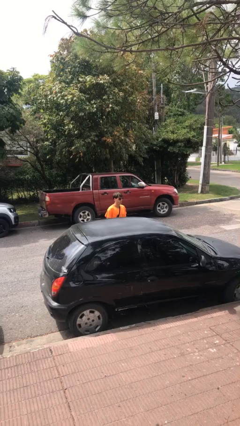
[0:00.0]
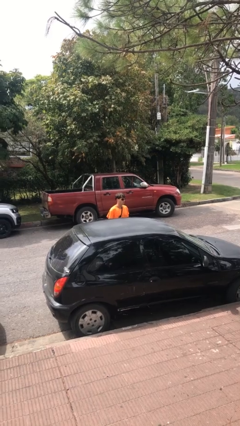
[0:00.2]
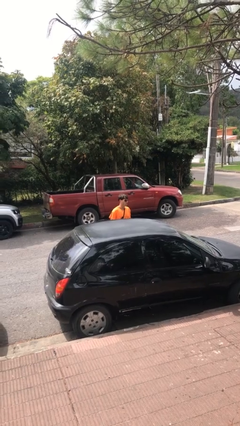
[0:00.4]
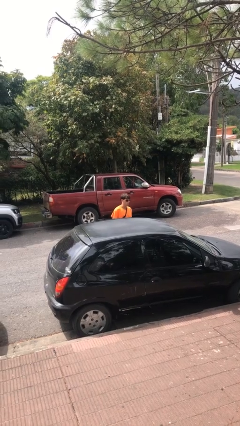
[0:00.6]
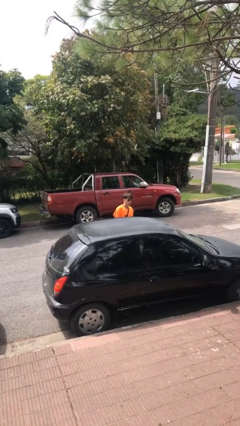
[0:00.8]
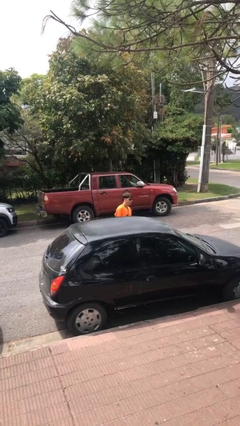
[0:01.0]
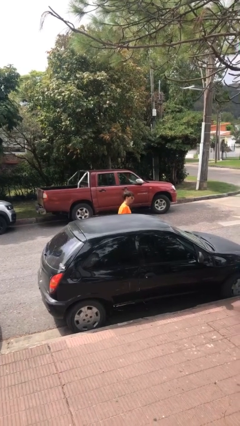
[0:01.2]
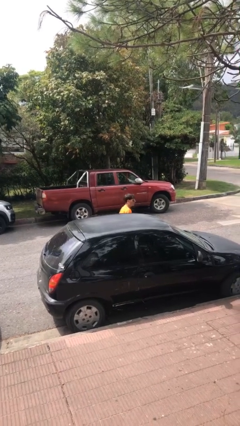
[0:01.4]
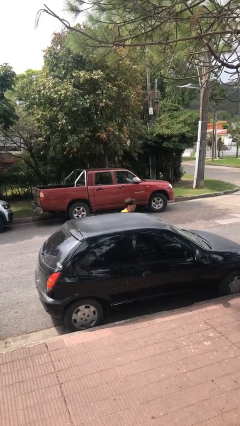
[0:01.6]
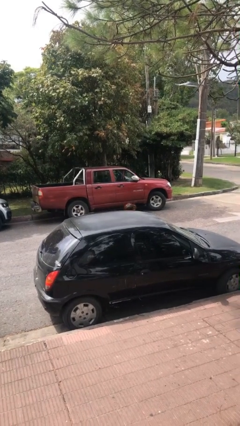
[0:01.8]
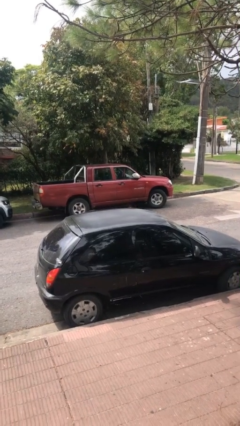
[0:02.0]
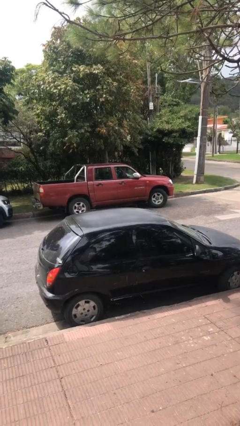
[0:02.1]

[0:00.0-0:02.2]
person enters car

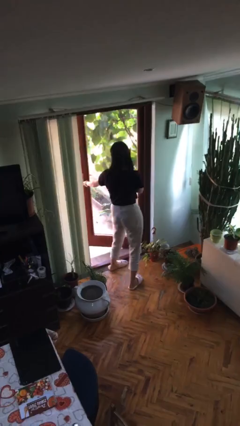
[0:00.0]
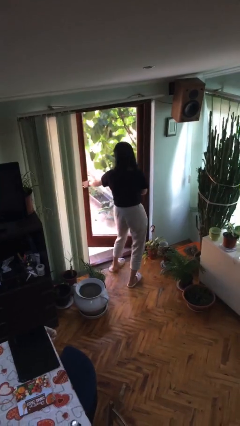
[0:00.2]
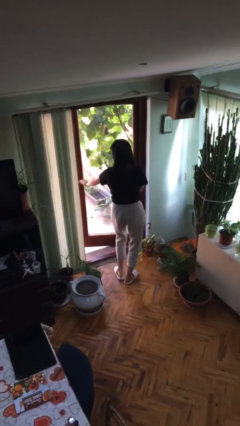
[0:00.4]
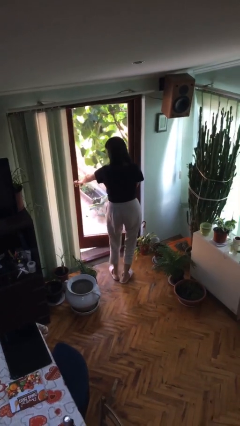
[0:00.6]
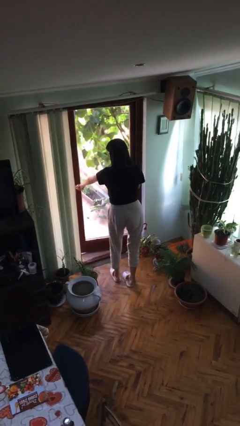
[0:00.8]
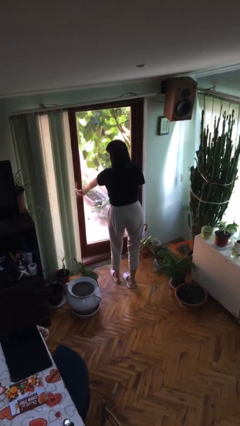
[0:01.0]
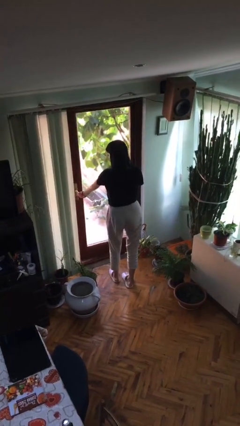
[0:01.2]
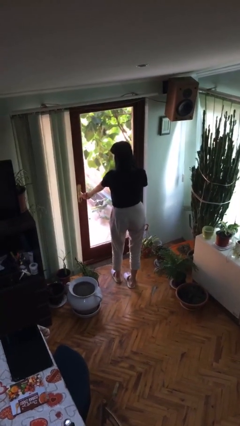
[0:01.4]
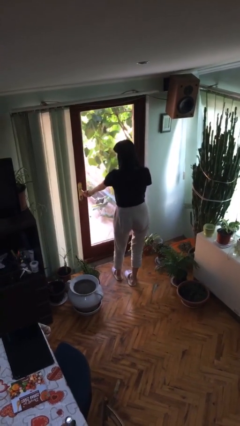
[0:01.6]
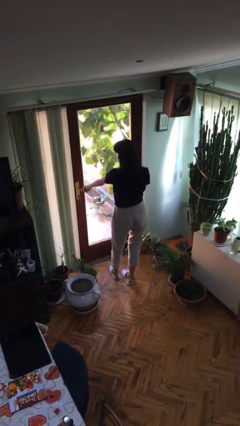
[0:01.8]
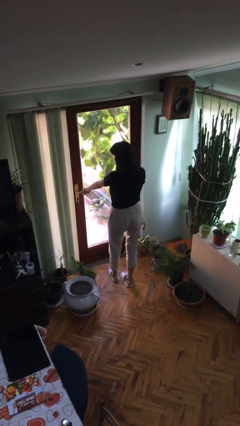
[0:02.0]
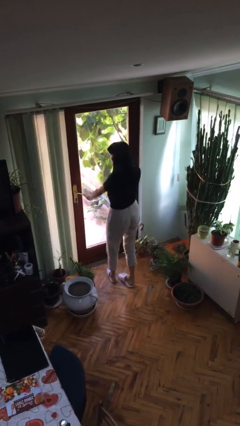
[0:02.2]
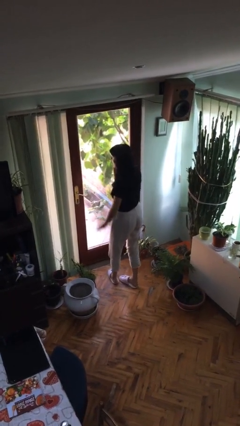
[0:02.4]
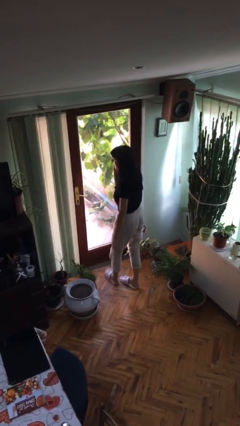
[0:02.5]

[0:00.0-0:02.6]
person closes facility door

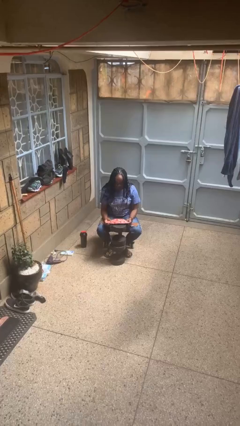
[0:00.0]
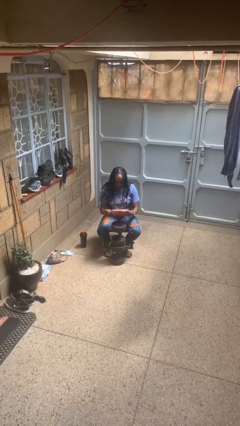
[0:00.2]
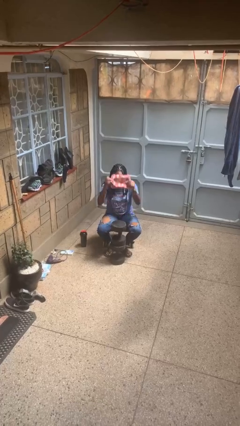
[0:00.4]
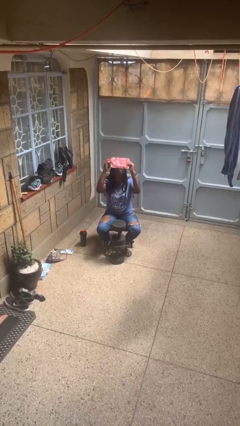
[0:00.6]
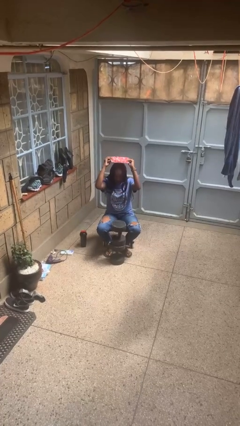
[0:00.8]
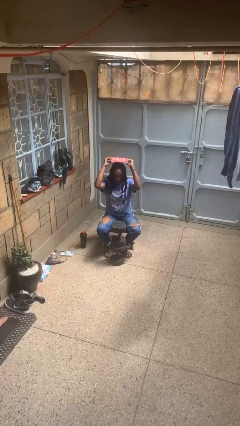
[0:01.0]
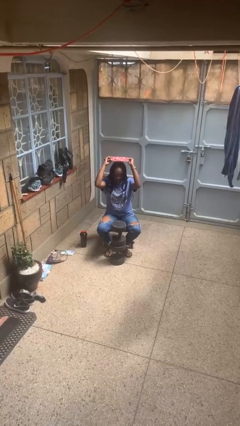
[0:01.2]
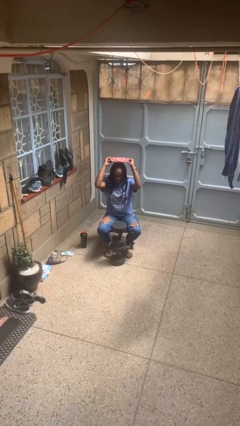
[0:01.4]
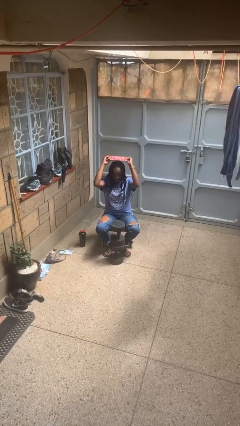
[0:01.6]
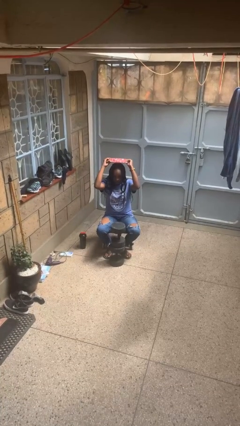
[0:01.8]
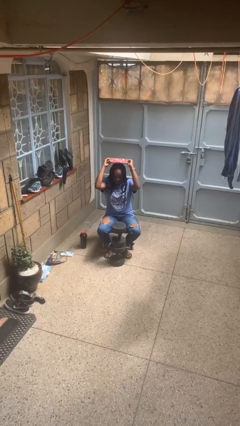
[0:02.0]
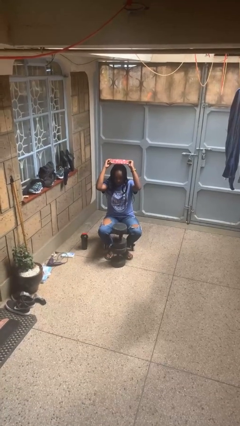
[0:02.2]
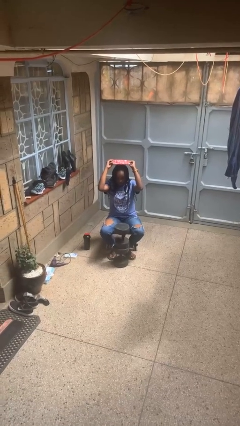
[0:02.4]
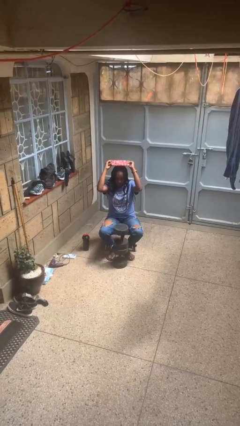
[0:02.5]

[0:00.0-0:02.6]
person holds object above head

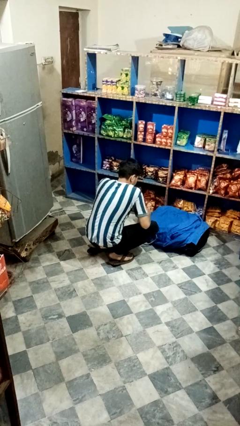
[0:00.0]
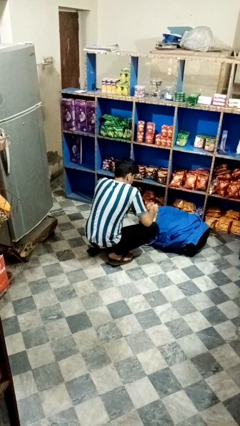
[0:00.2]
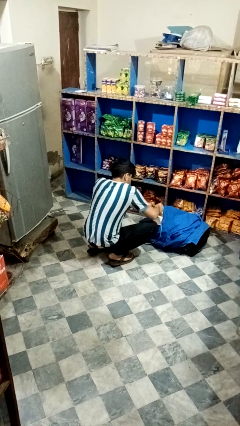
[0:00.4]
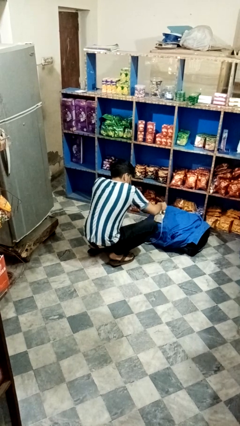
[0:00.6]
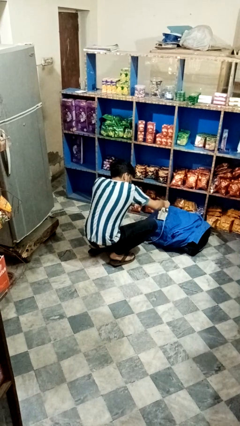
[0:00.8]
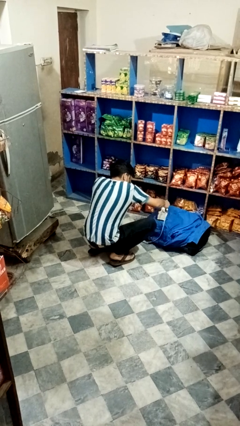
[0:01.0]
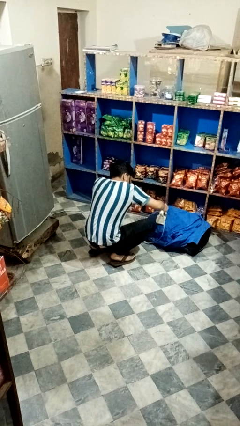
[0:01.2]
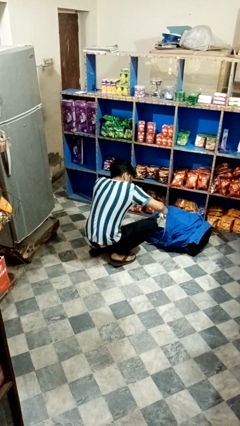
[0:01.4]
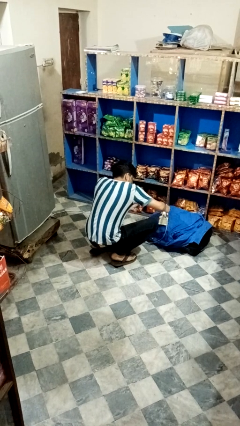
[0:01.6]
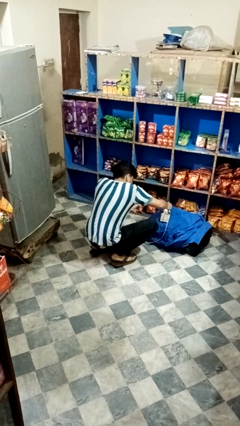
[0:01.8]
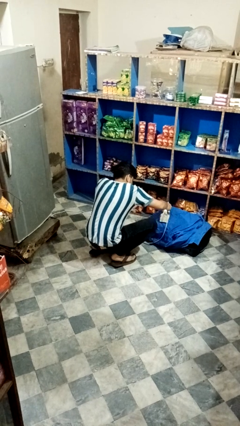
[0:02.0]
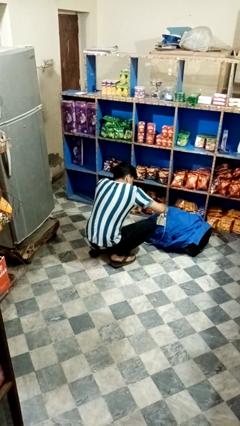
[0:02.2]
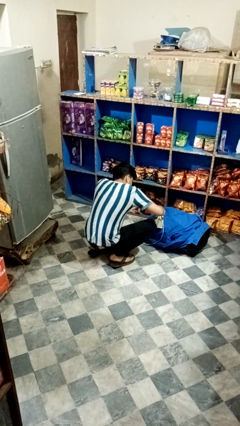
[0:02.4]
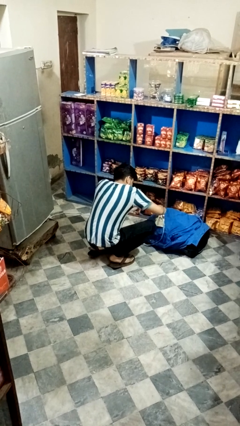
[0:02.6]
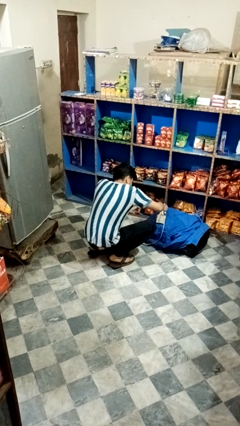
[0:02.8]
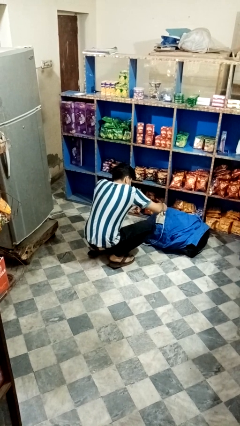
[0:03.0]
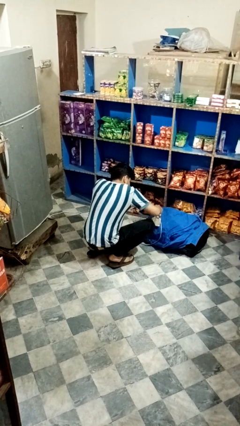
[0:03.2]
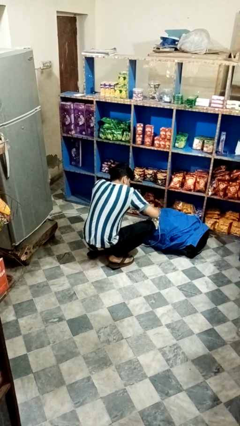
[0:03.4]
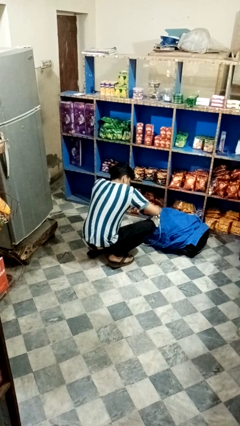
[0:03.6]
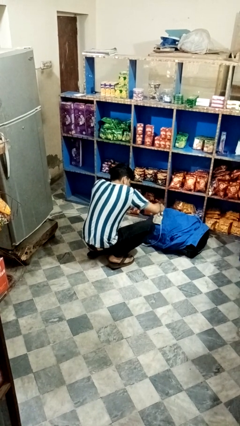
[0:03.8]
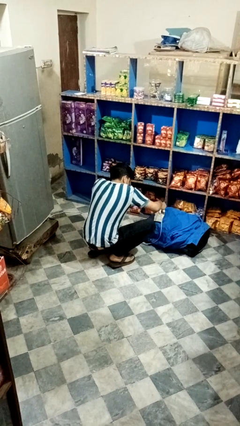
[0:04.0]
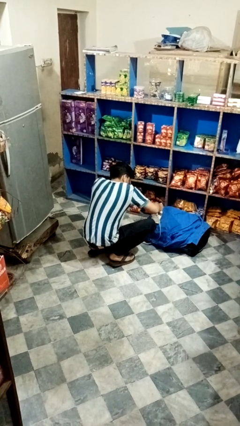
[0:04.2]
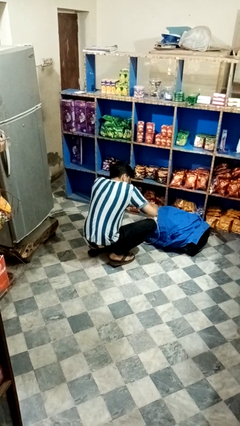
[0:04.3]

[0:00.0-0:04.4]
person irons clothes

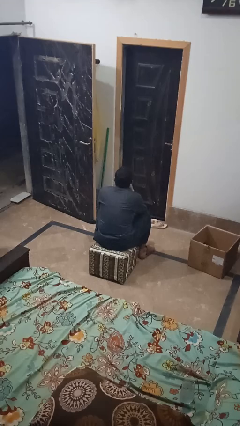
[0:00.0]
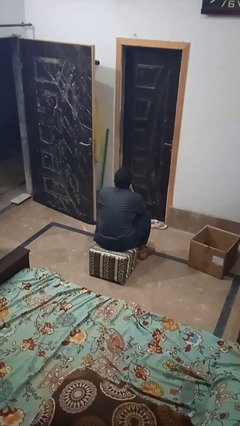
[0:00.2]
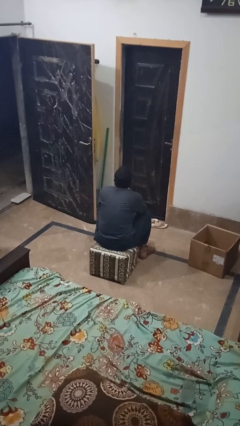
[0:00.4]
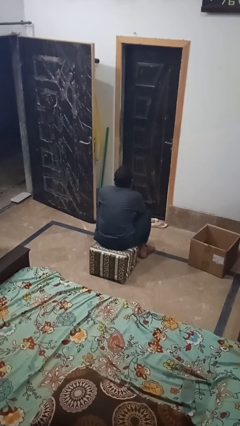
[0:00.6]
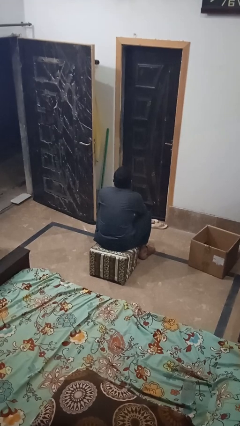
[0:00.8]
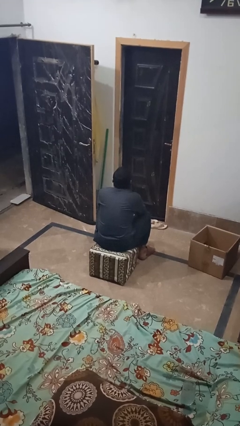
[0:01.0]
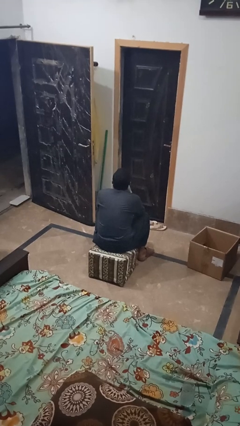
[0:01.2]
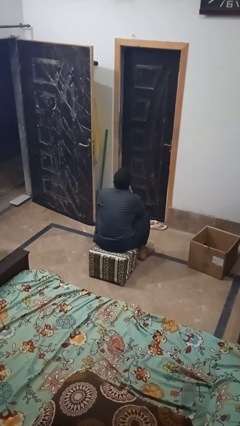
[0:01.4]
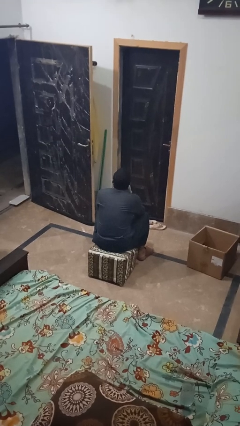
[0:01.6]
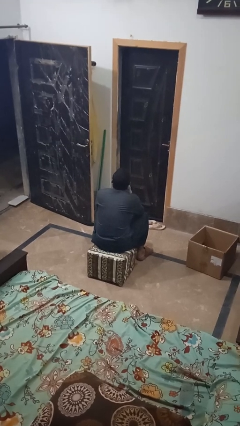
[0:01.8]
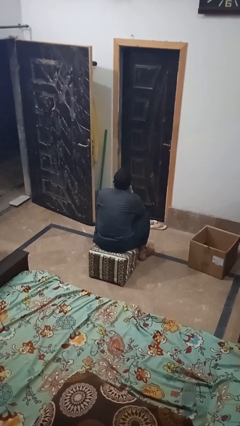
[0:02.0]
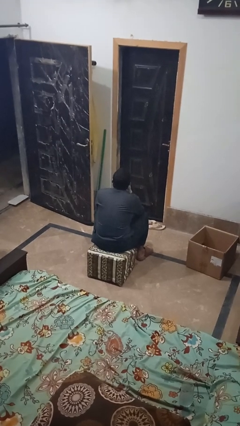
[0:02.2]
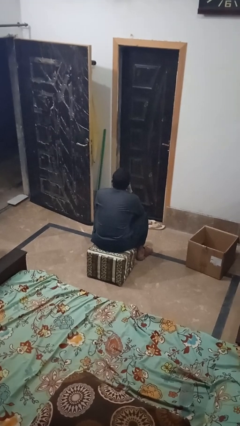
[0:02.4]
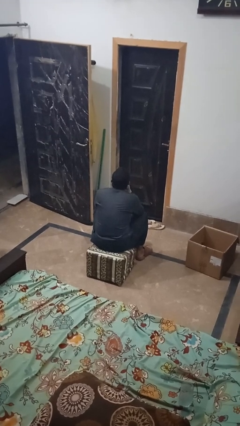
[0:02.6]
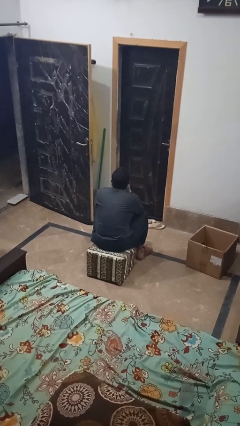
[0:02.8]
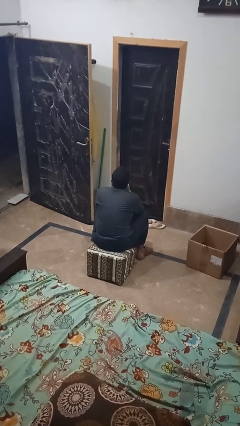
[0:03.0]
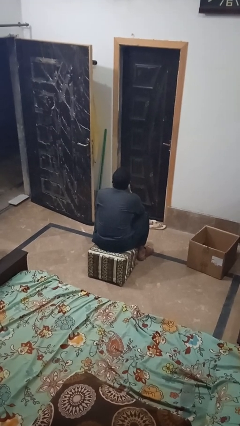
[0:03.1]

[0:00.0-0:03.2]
person strokes chin

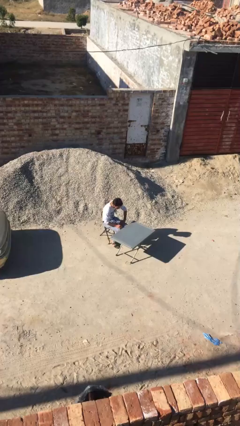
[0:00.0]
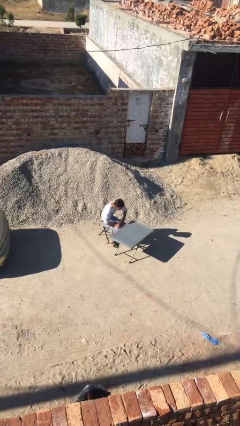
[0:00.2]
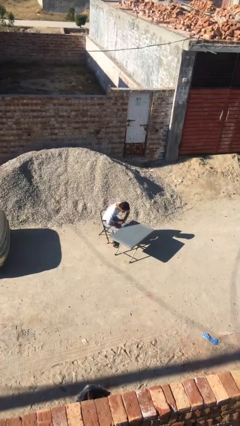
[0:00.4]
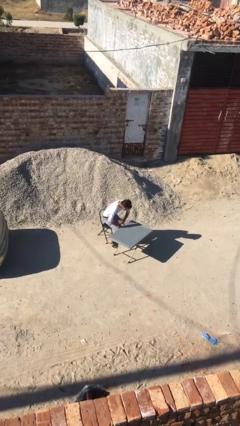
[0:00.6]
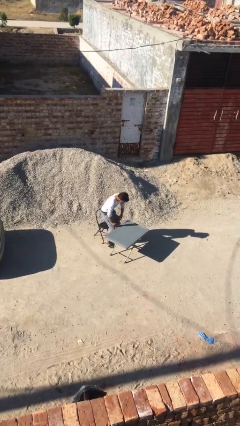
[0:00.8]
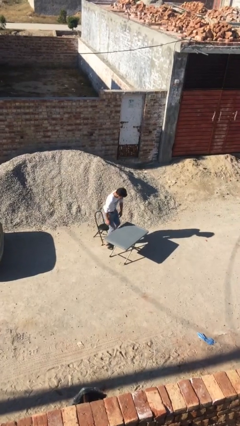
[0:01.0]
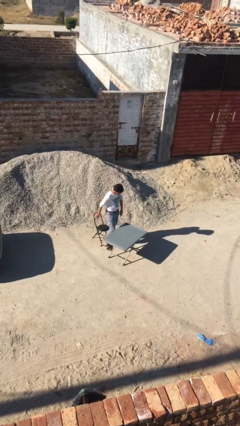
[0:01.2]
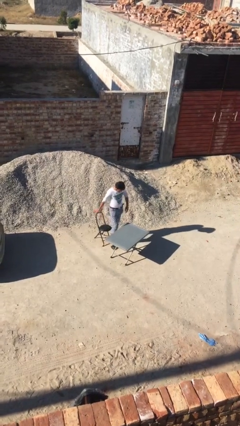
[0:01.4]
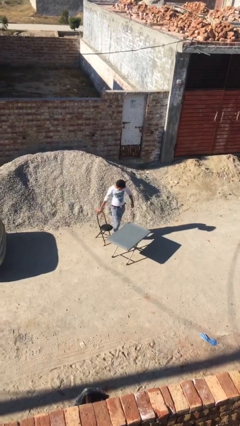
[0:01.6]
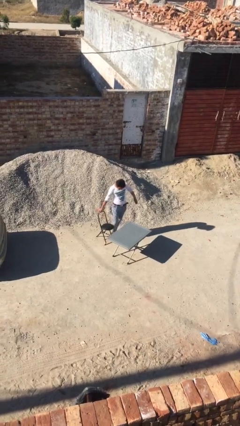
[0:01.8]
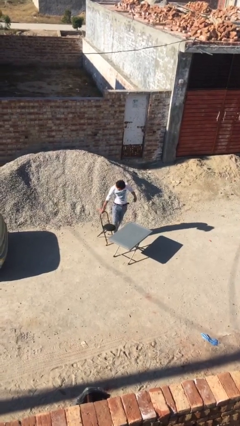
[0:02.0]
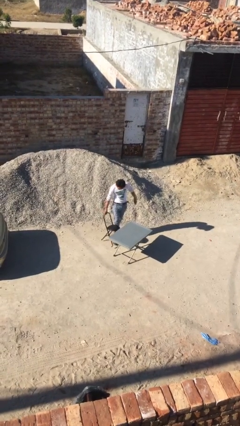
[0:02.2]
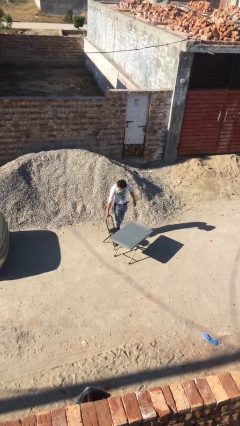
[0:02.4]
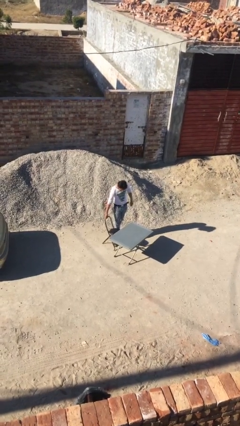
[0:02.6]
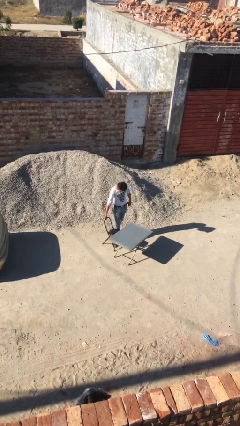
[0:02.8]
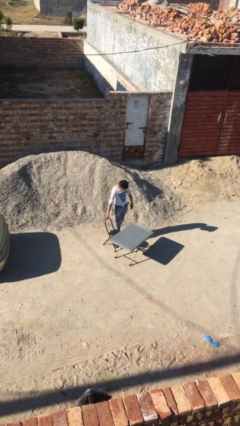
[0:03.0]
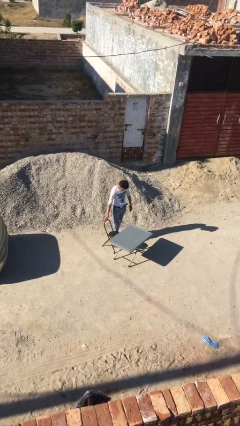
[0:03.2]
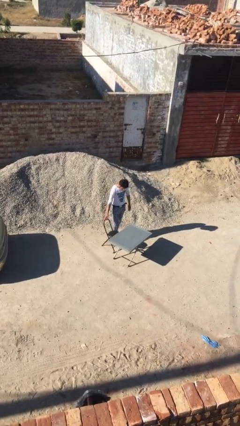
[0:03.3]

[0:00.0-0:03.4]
person stands up
